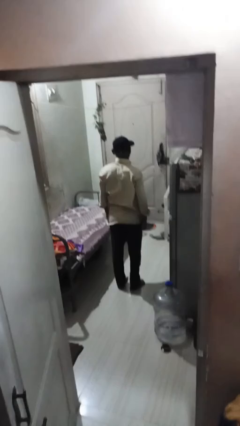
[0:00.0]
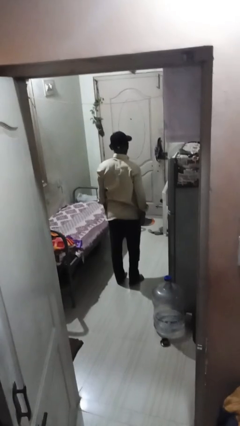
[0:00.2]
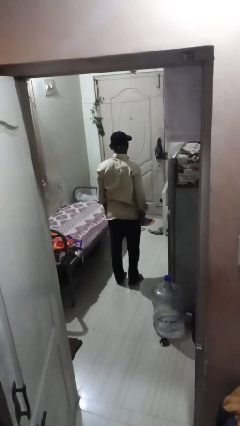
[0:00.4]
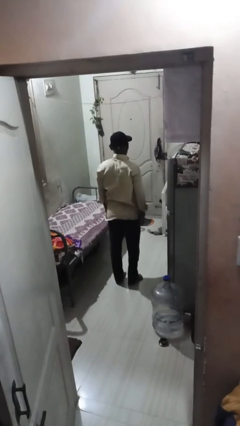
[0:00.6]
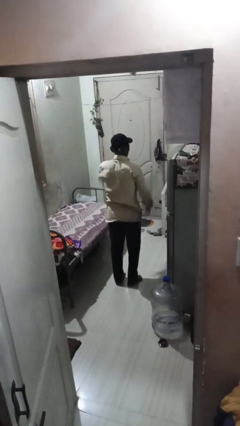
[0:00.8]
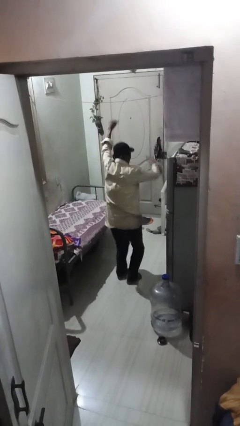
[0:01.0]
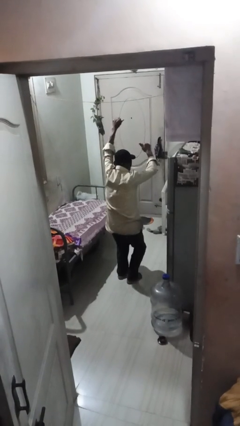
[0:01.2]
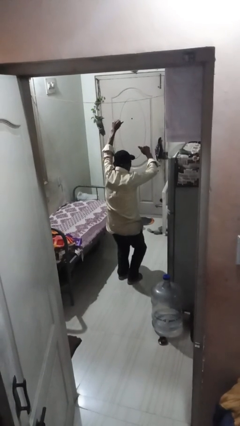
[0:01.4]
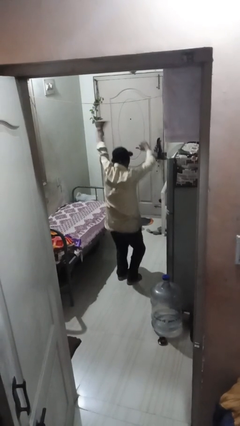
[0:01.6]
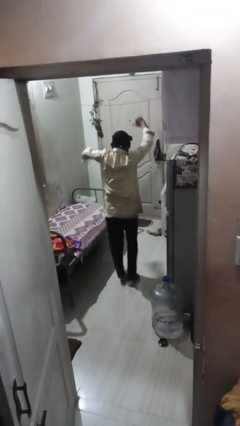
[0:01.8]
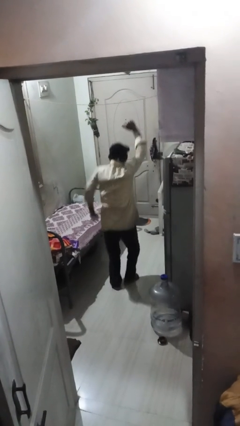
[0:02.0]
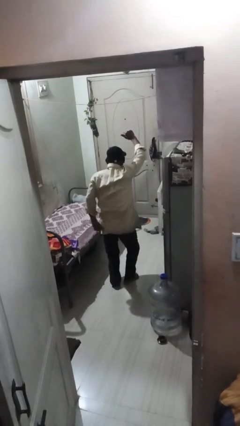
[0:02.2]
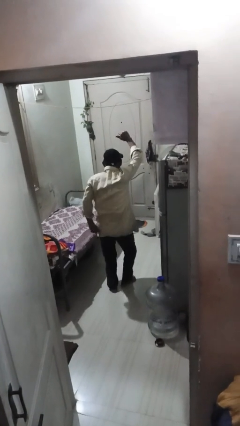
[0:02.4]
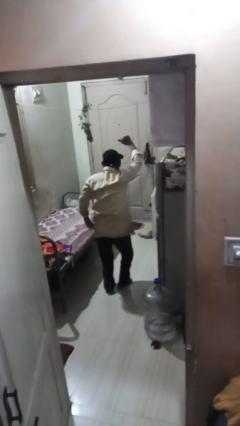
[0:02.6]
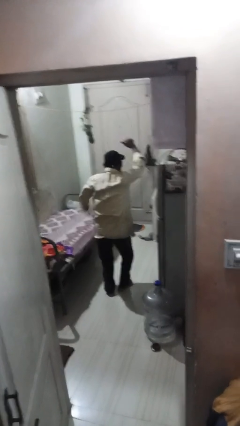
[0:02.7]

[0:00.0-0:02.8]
person dances in place

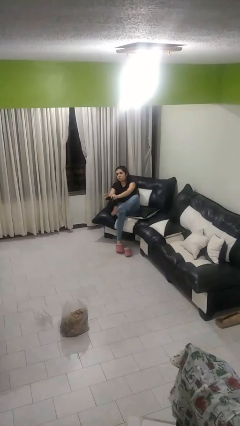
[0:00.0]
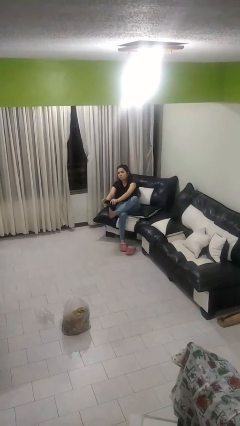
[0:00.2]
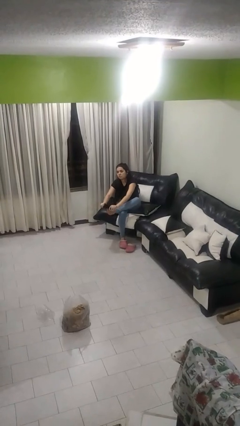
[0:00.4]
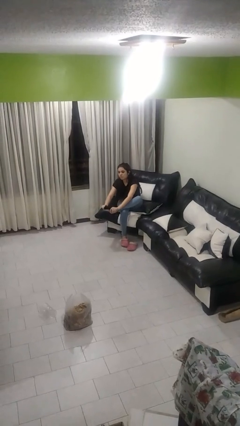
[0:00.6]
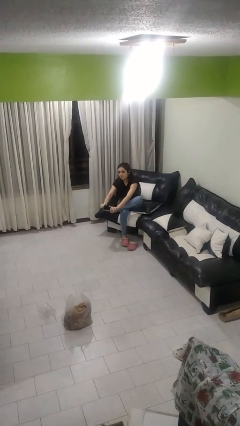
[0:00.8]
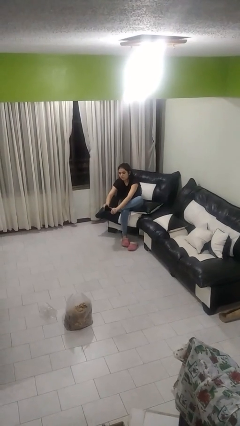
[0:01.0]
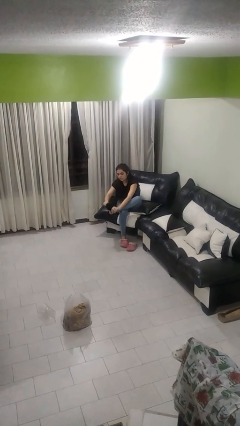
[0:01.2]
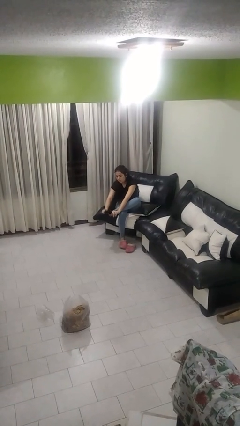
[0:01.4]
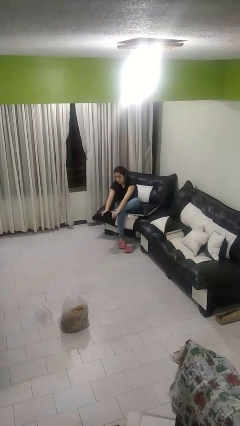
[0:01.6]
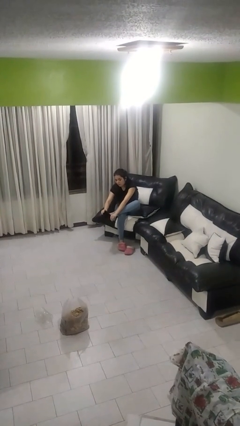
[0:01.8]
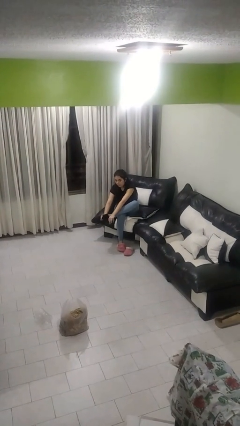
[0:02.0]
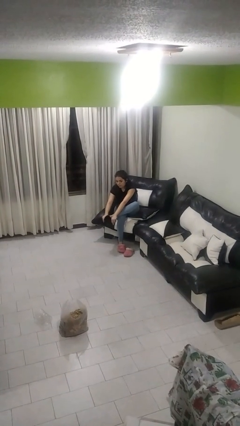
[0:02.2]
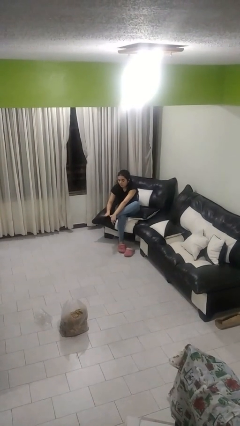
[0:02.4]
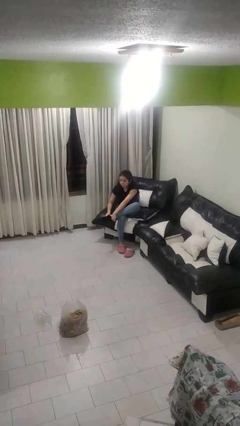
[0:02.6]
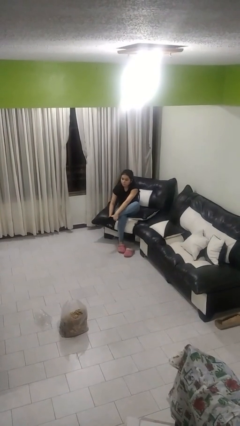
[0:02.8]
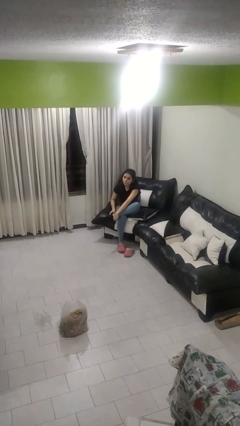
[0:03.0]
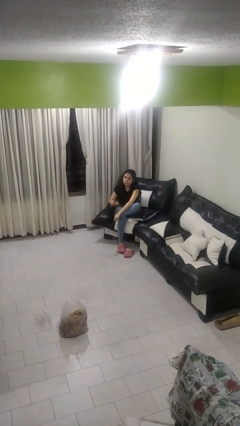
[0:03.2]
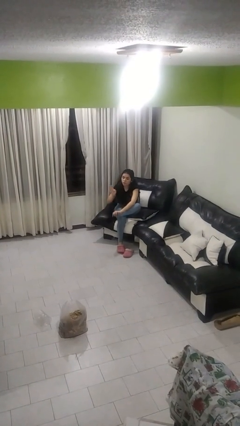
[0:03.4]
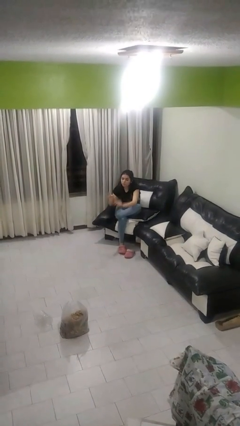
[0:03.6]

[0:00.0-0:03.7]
person puts on socks

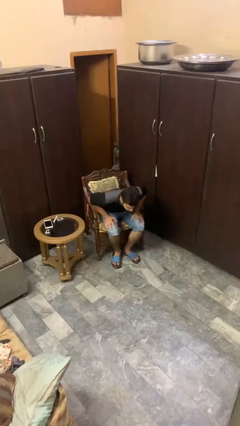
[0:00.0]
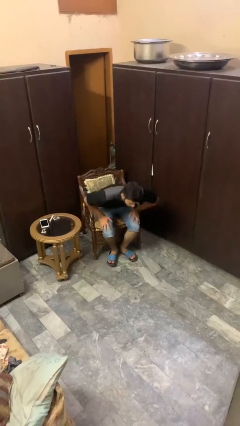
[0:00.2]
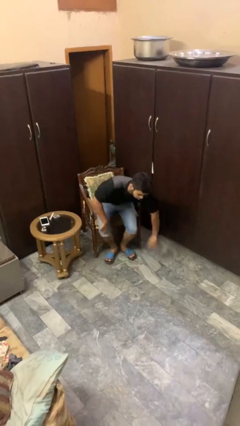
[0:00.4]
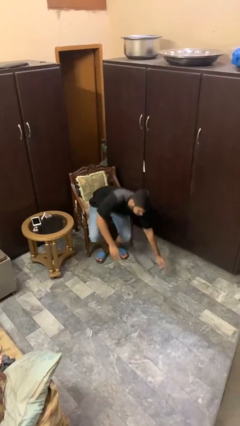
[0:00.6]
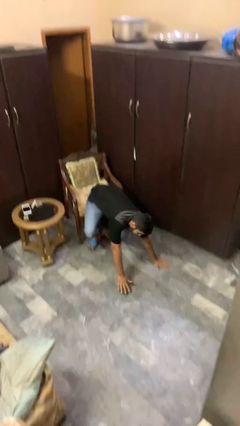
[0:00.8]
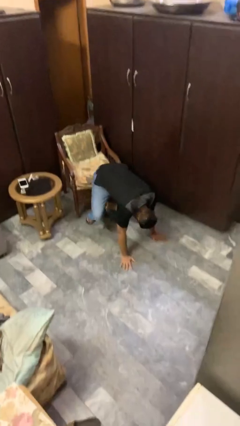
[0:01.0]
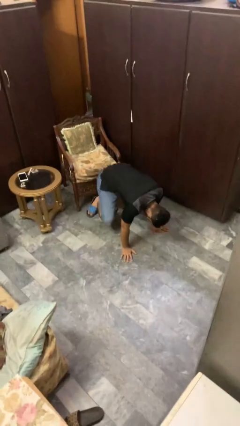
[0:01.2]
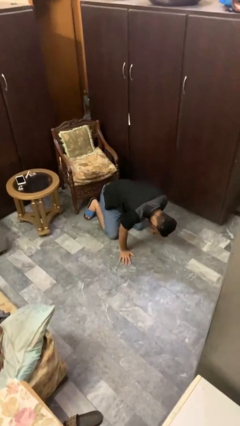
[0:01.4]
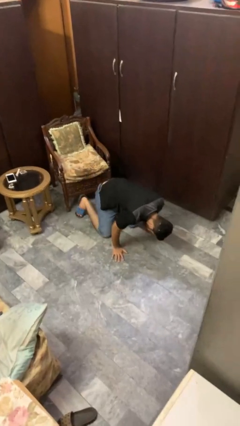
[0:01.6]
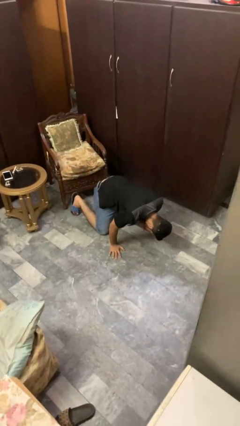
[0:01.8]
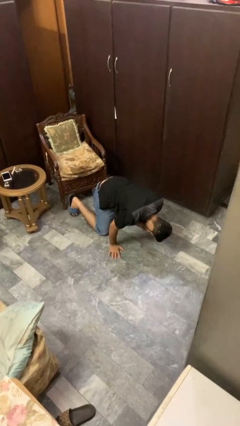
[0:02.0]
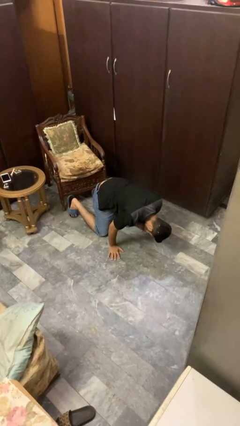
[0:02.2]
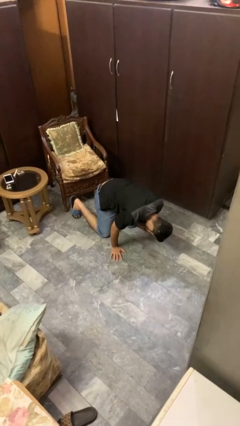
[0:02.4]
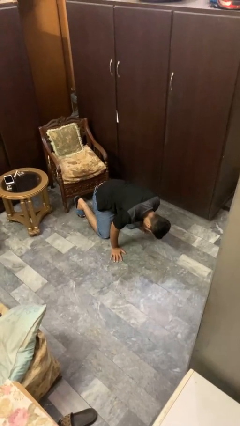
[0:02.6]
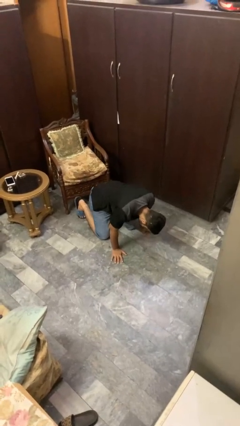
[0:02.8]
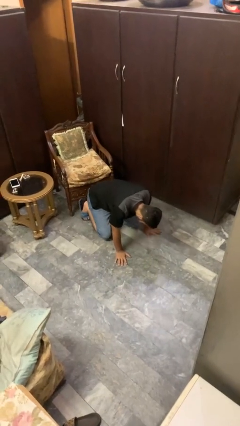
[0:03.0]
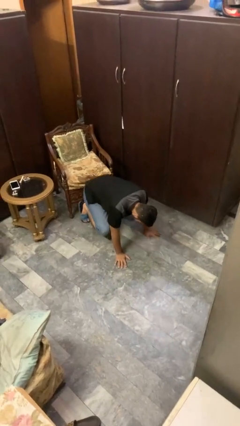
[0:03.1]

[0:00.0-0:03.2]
person falls from chair

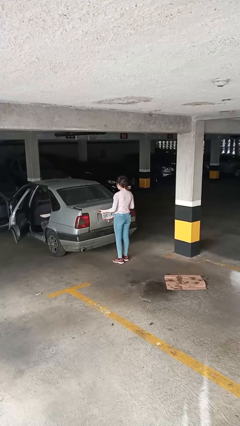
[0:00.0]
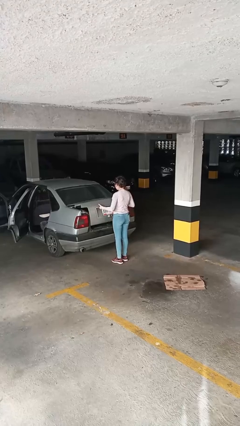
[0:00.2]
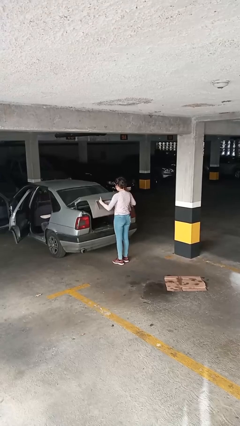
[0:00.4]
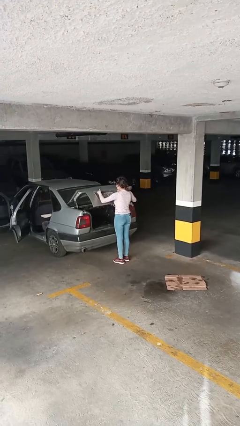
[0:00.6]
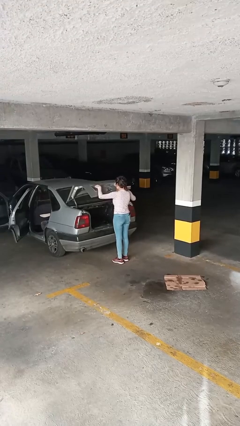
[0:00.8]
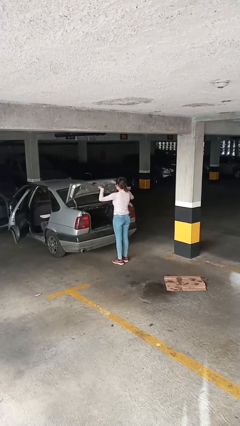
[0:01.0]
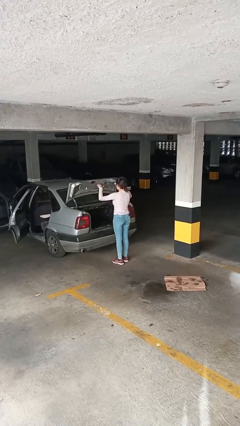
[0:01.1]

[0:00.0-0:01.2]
person opens car trunk
